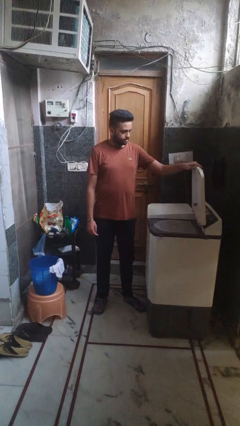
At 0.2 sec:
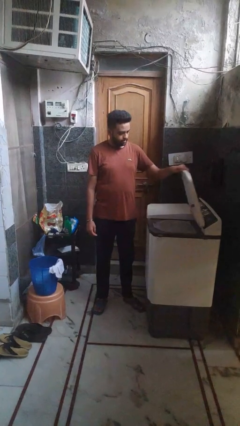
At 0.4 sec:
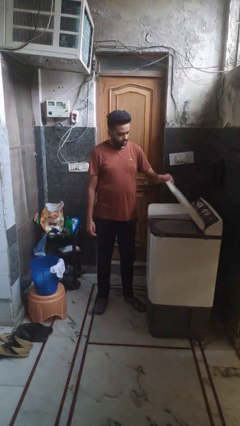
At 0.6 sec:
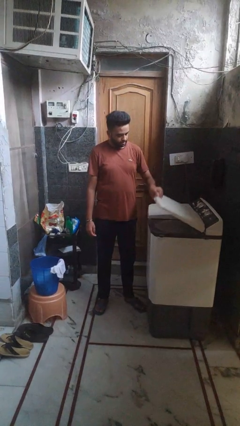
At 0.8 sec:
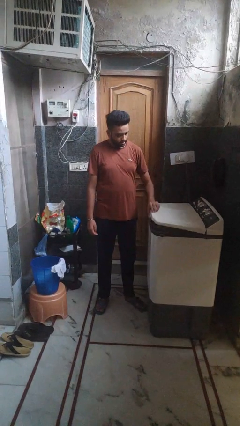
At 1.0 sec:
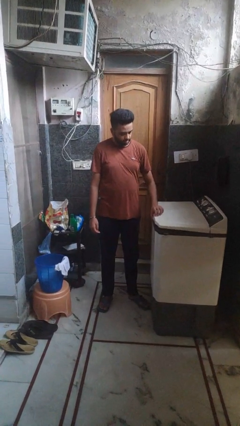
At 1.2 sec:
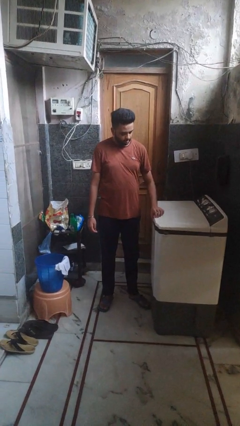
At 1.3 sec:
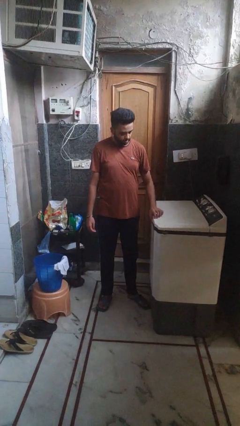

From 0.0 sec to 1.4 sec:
person closes clothes washer

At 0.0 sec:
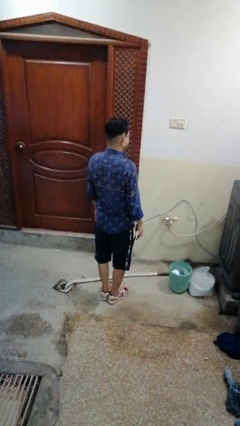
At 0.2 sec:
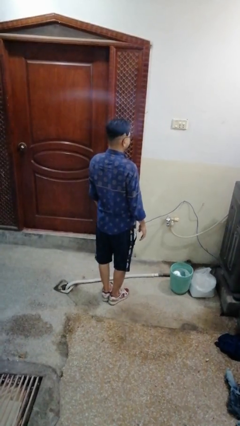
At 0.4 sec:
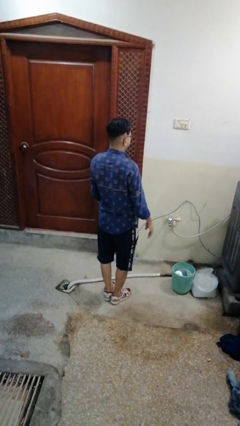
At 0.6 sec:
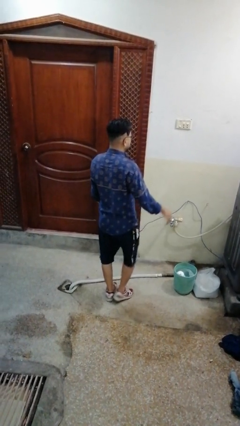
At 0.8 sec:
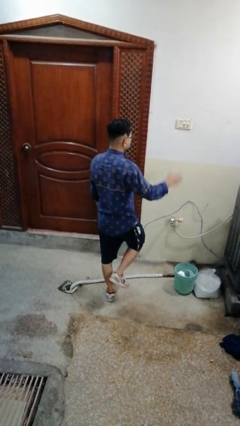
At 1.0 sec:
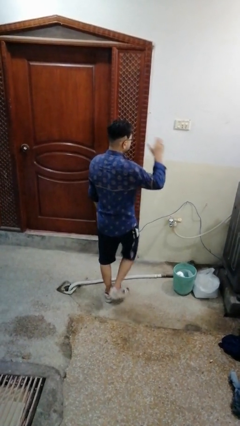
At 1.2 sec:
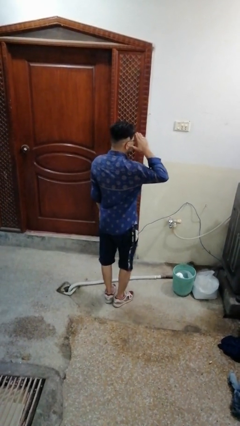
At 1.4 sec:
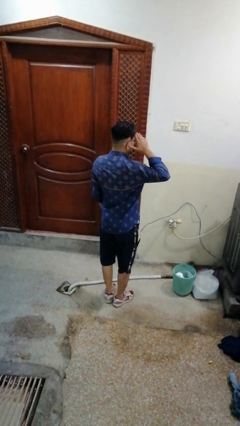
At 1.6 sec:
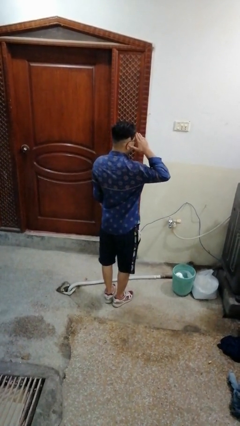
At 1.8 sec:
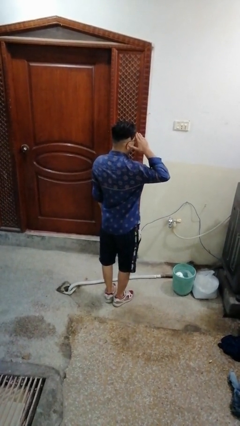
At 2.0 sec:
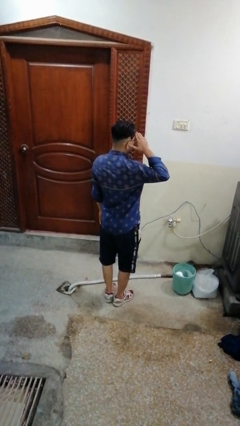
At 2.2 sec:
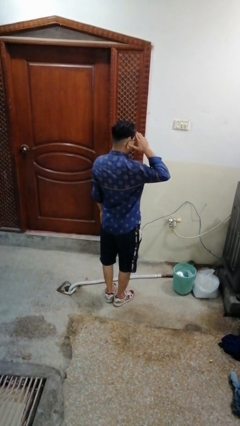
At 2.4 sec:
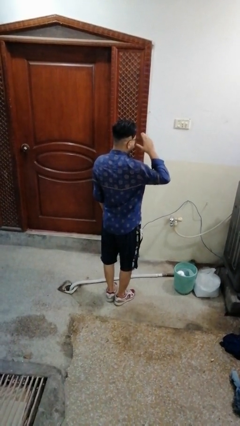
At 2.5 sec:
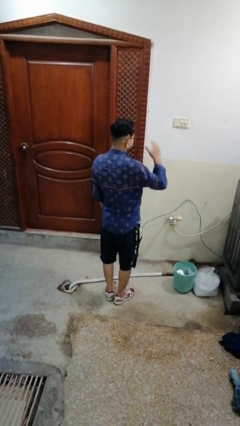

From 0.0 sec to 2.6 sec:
person salutes

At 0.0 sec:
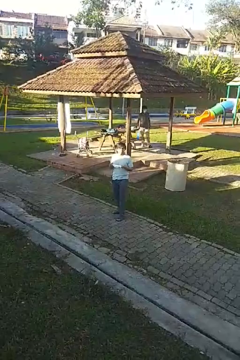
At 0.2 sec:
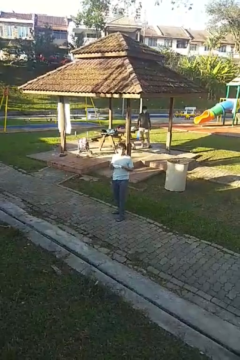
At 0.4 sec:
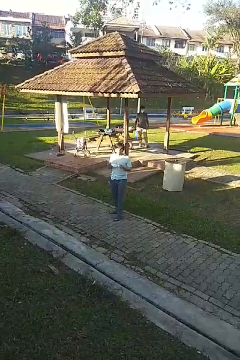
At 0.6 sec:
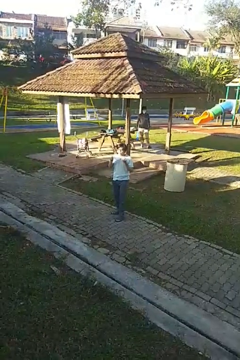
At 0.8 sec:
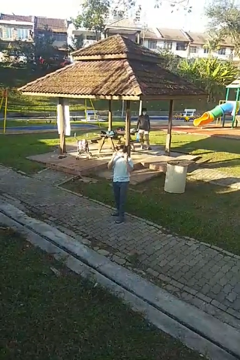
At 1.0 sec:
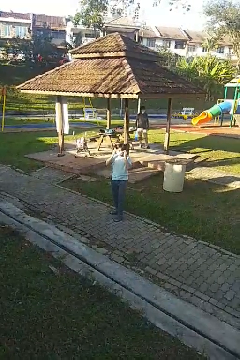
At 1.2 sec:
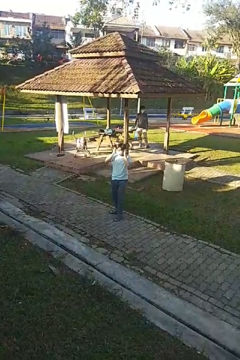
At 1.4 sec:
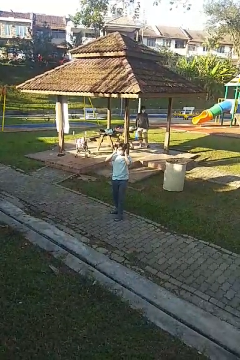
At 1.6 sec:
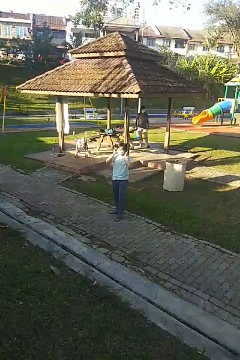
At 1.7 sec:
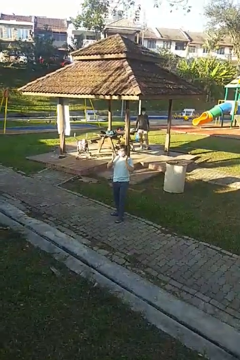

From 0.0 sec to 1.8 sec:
person puts on facemask

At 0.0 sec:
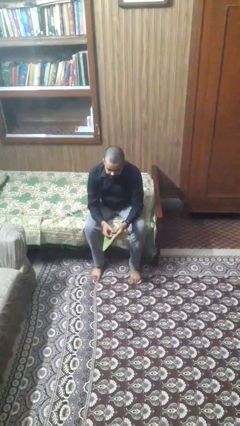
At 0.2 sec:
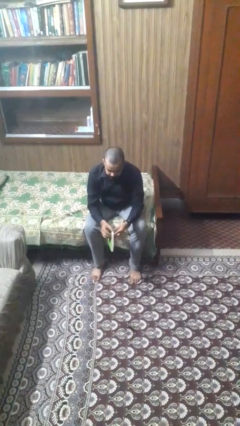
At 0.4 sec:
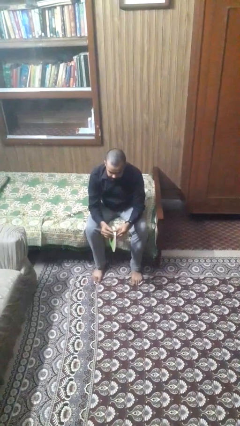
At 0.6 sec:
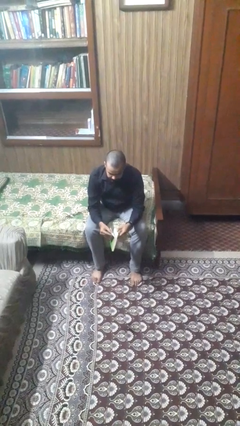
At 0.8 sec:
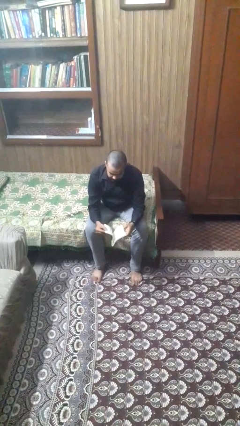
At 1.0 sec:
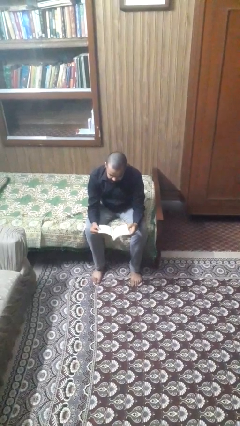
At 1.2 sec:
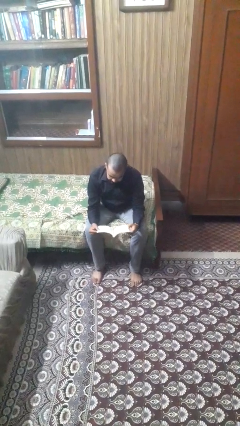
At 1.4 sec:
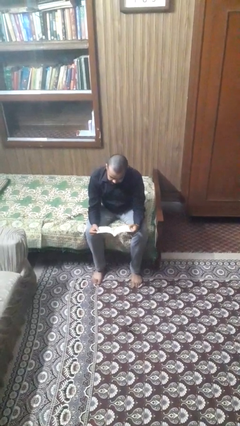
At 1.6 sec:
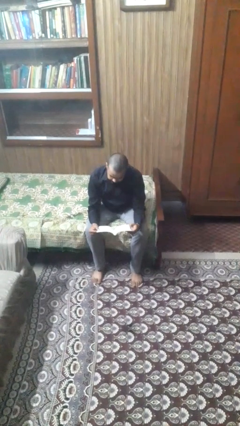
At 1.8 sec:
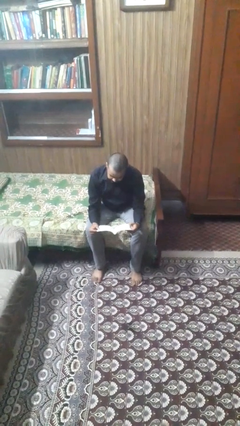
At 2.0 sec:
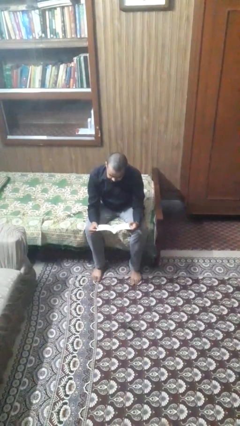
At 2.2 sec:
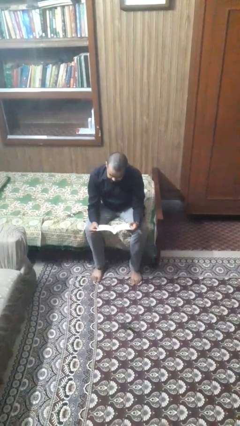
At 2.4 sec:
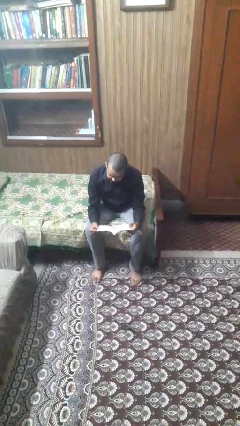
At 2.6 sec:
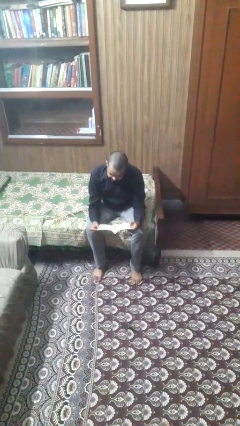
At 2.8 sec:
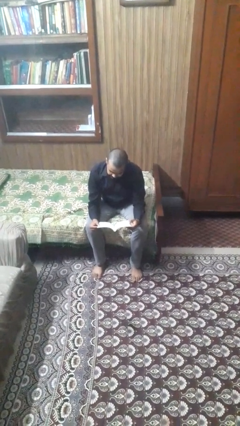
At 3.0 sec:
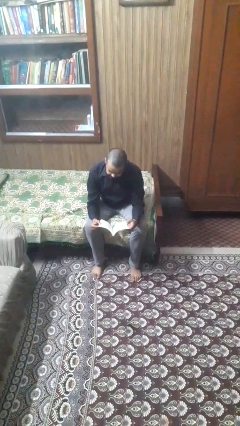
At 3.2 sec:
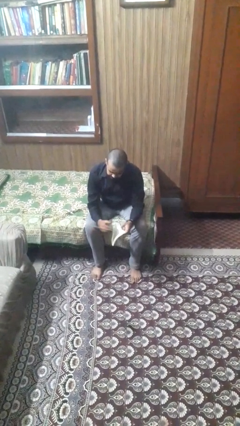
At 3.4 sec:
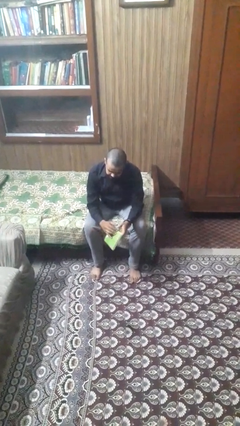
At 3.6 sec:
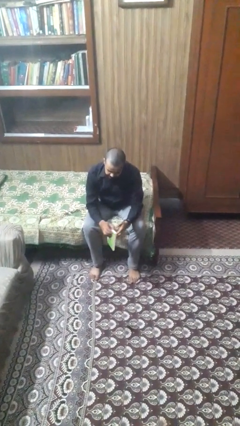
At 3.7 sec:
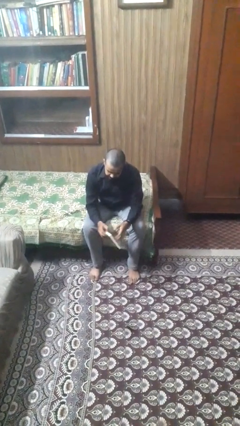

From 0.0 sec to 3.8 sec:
person reads magazine

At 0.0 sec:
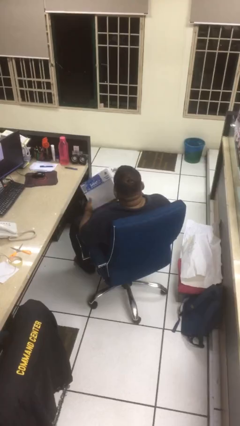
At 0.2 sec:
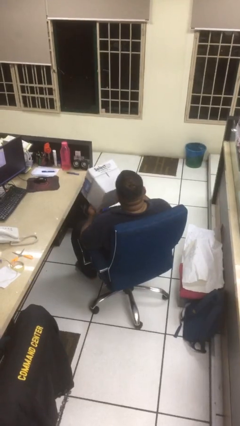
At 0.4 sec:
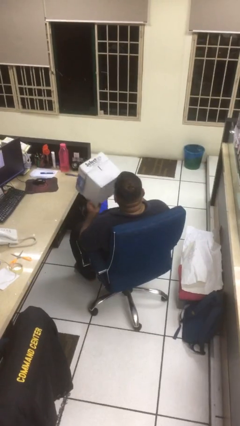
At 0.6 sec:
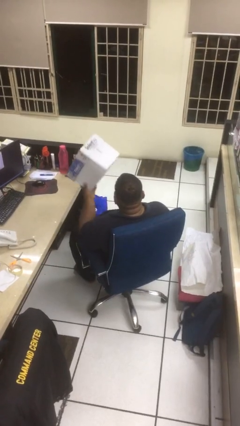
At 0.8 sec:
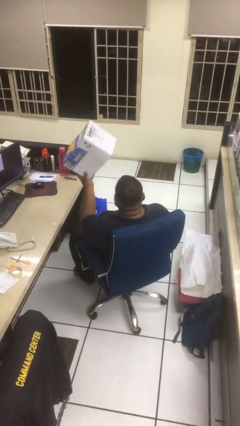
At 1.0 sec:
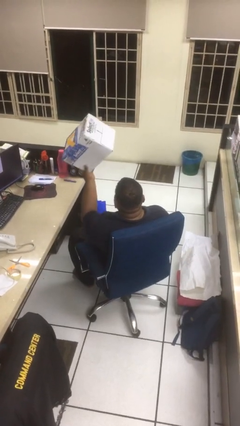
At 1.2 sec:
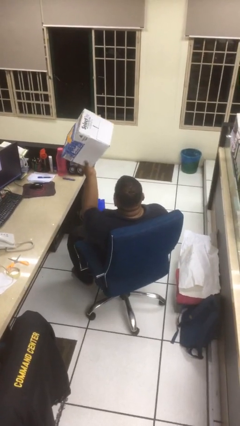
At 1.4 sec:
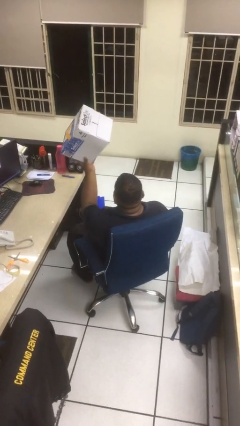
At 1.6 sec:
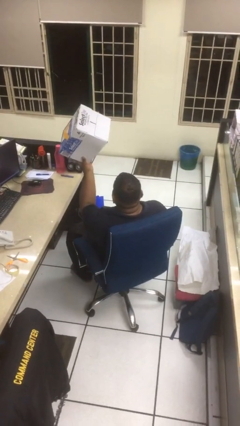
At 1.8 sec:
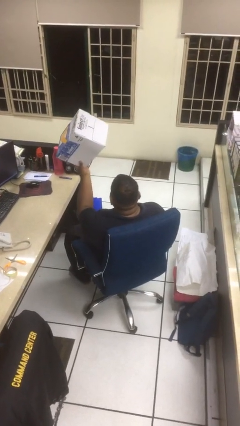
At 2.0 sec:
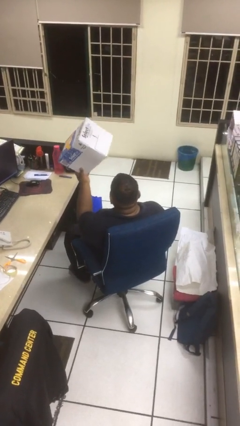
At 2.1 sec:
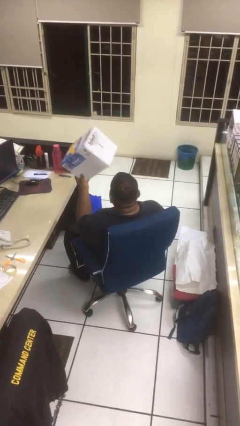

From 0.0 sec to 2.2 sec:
person holds object above head

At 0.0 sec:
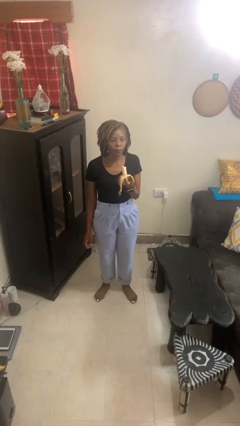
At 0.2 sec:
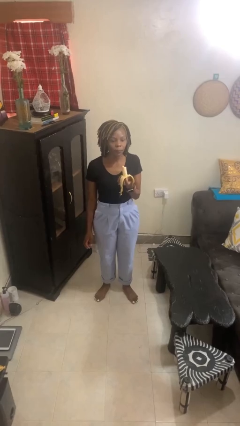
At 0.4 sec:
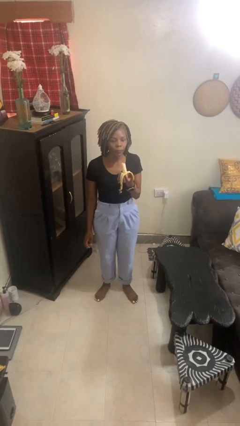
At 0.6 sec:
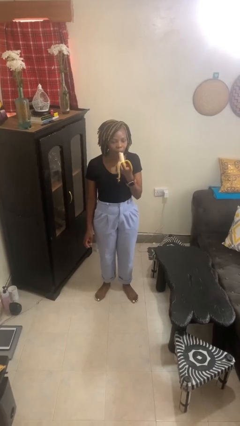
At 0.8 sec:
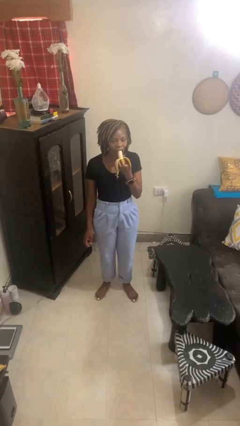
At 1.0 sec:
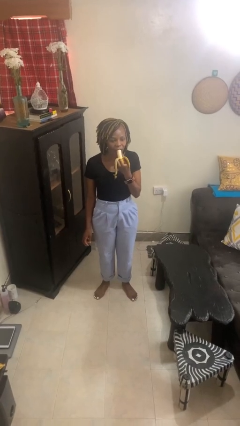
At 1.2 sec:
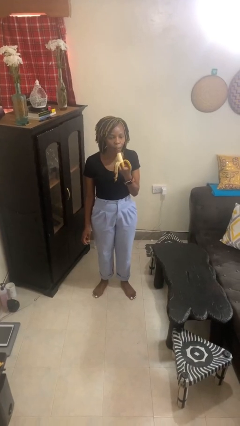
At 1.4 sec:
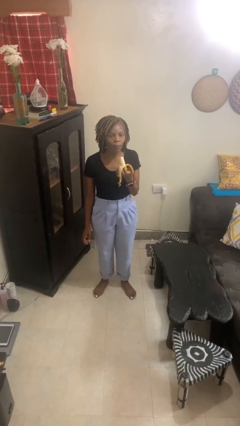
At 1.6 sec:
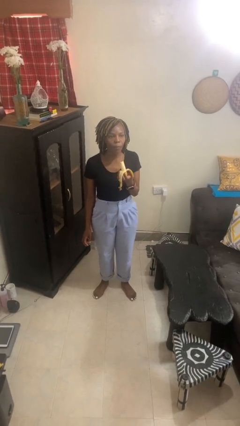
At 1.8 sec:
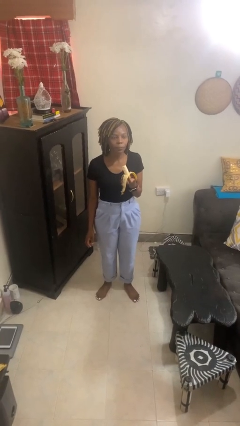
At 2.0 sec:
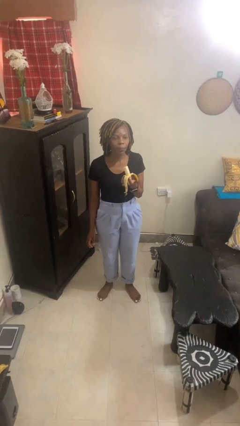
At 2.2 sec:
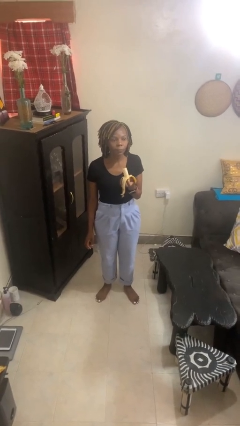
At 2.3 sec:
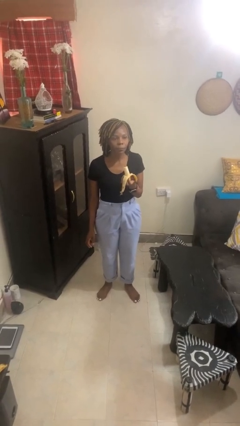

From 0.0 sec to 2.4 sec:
person eats banana

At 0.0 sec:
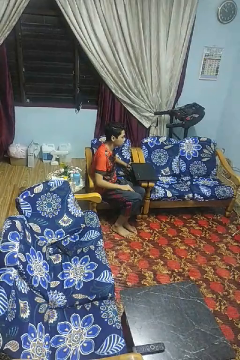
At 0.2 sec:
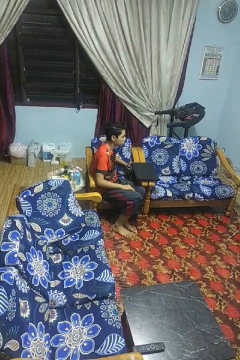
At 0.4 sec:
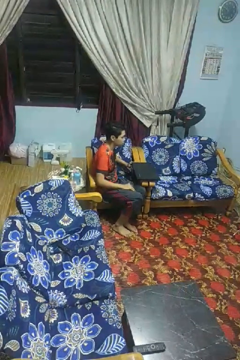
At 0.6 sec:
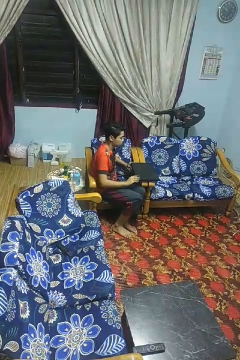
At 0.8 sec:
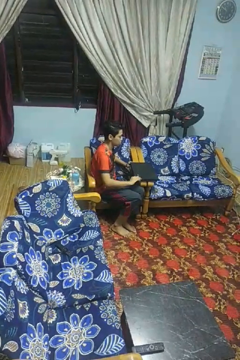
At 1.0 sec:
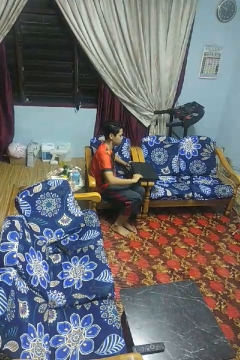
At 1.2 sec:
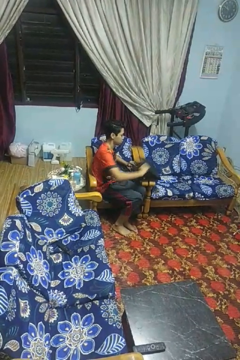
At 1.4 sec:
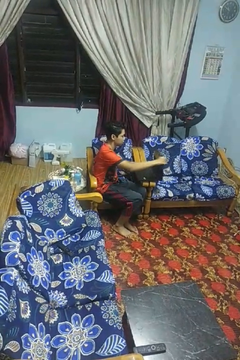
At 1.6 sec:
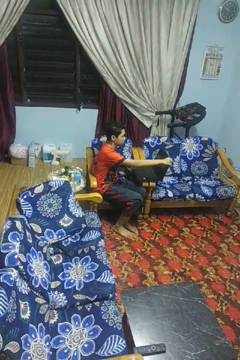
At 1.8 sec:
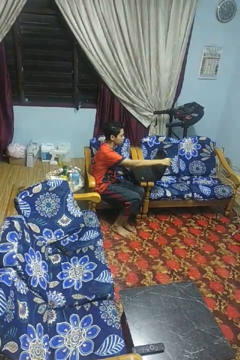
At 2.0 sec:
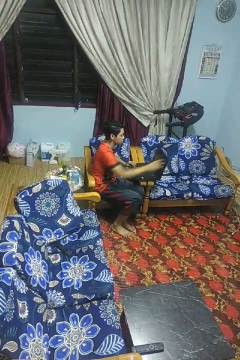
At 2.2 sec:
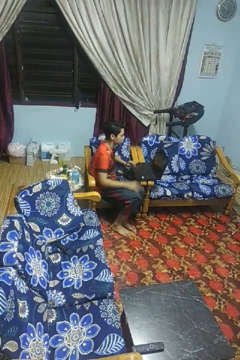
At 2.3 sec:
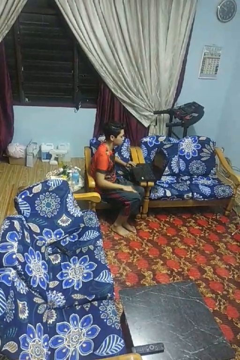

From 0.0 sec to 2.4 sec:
person opens laptop

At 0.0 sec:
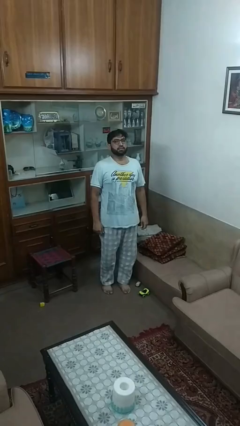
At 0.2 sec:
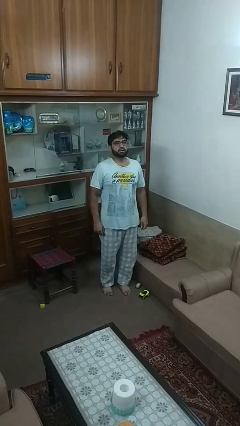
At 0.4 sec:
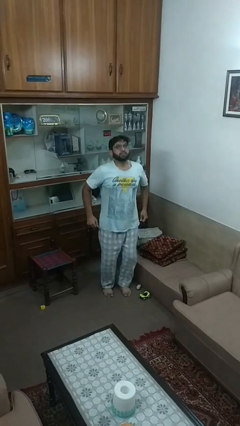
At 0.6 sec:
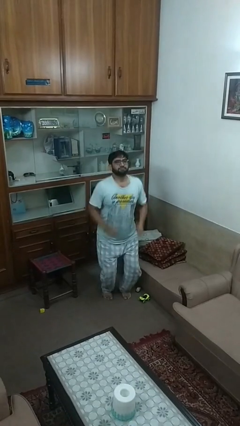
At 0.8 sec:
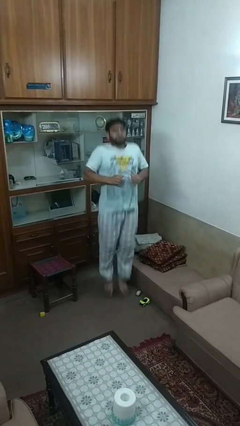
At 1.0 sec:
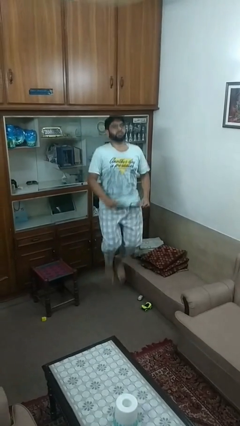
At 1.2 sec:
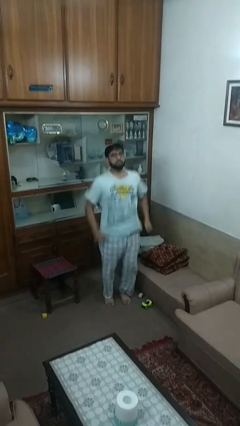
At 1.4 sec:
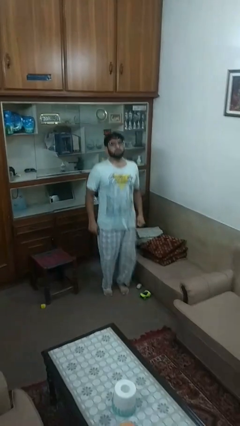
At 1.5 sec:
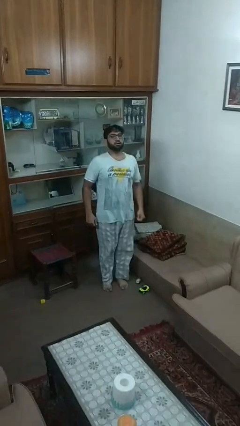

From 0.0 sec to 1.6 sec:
person jumps
